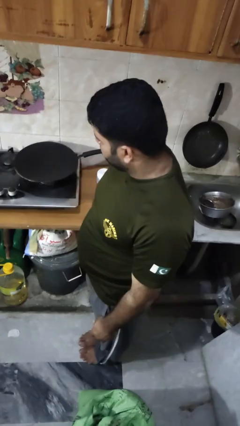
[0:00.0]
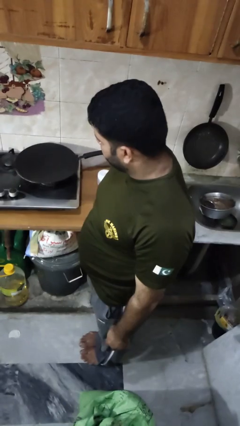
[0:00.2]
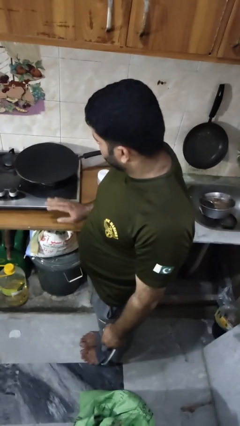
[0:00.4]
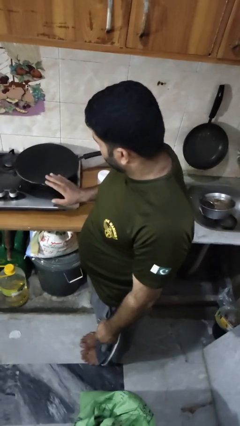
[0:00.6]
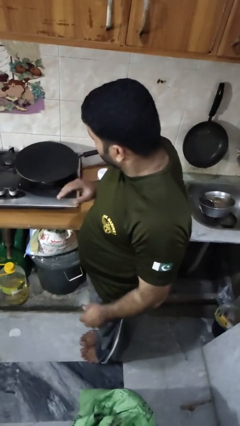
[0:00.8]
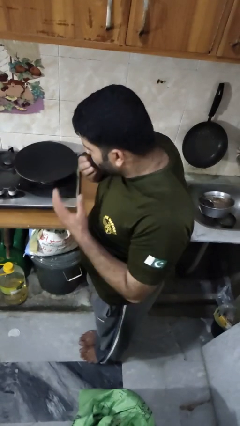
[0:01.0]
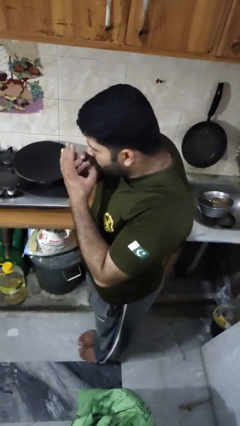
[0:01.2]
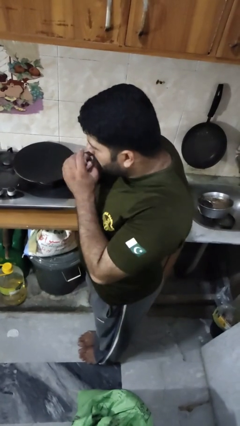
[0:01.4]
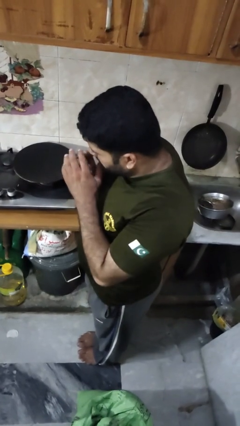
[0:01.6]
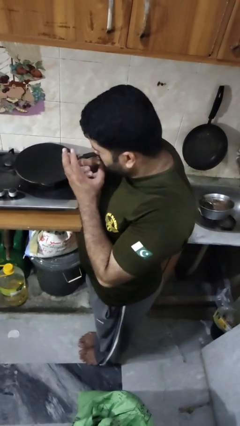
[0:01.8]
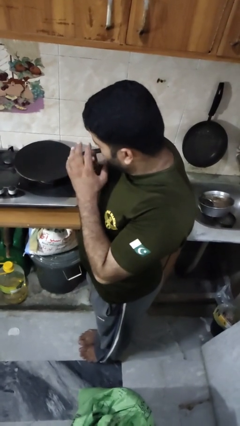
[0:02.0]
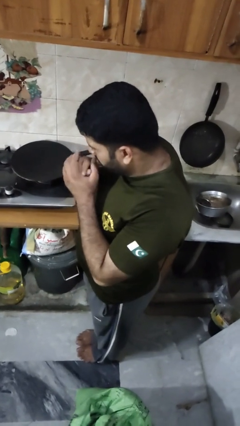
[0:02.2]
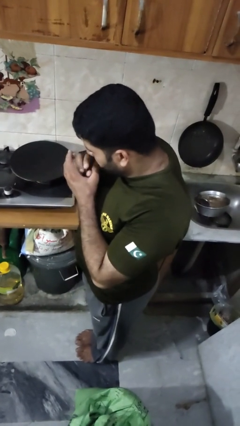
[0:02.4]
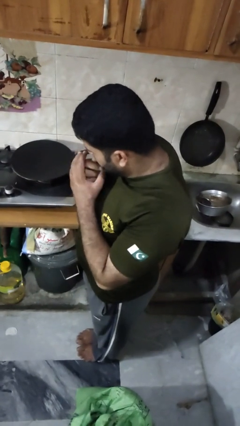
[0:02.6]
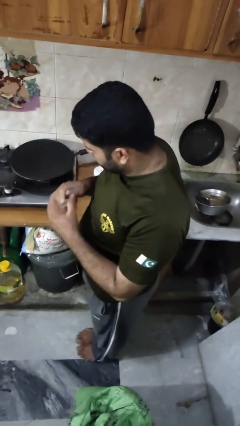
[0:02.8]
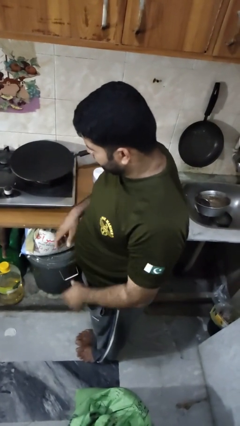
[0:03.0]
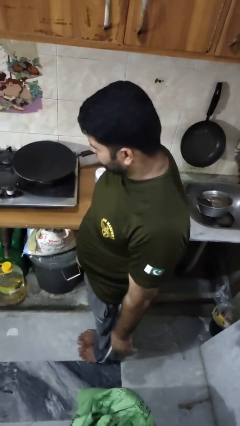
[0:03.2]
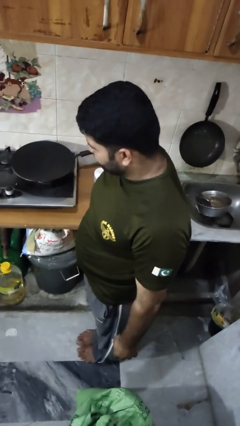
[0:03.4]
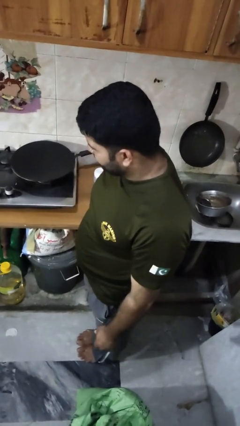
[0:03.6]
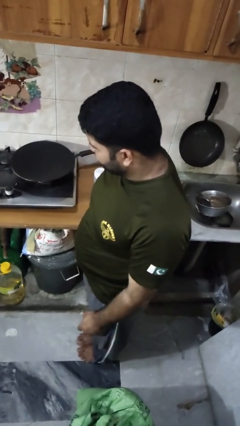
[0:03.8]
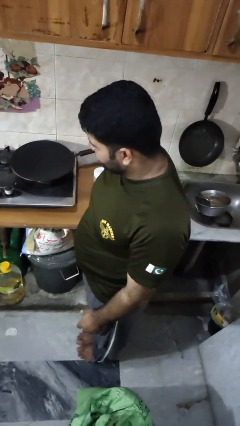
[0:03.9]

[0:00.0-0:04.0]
person burns hand

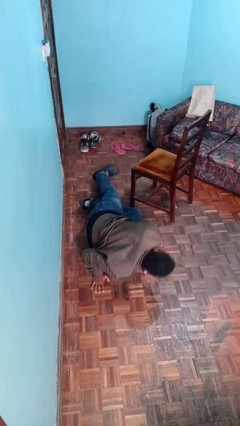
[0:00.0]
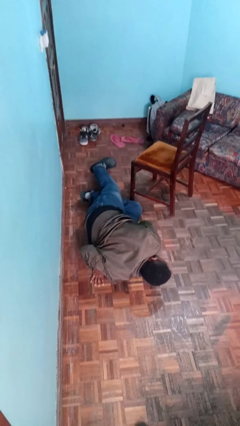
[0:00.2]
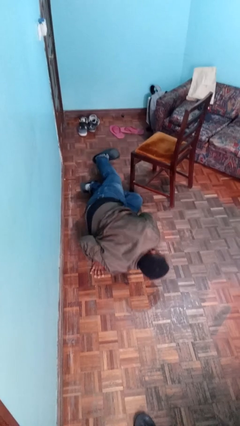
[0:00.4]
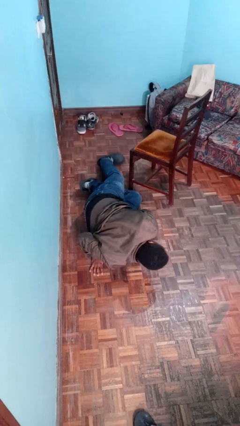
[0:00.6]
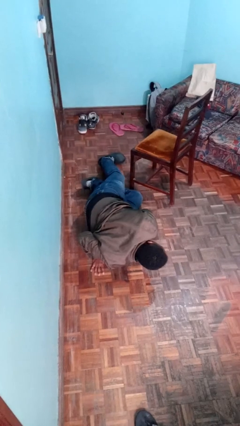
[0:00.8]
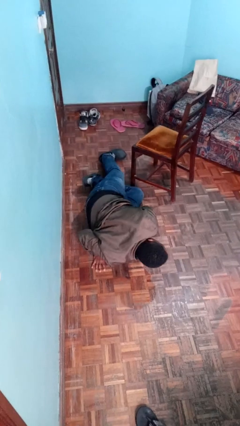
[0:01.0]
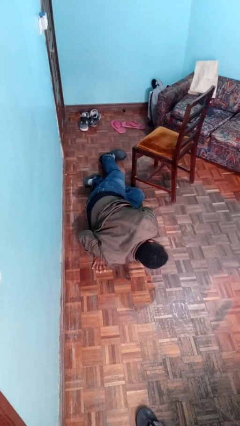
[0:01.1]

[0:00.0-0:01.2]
person lies down on floor

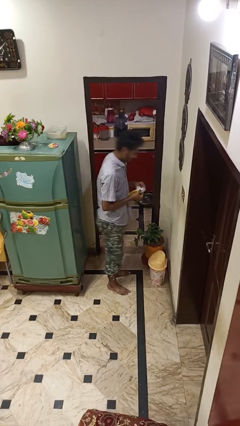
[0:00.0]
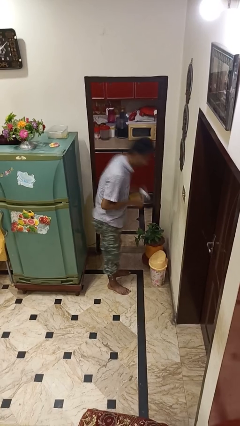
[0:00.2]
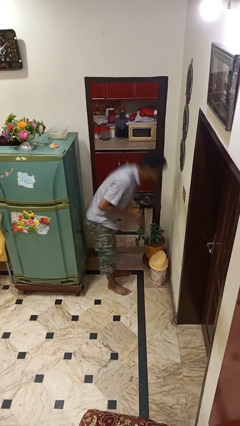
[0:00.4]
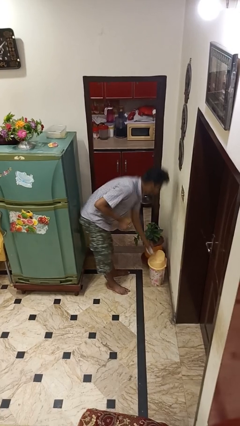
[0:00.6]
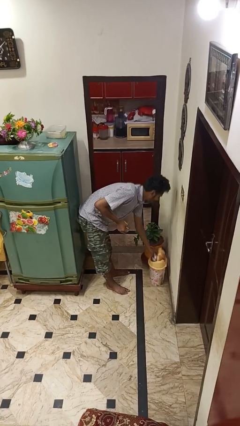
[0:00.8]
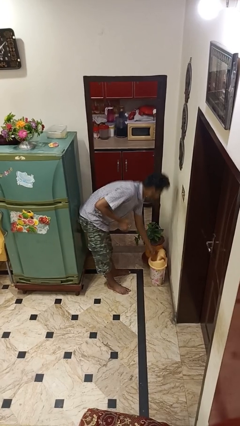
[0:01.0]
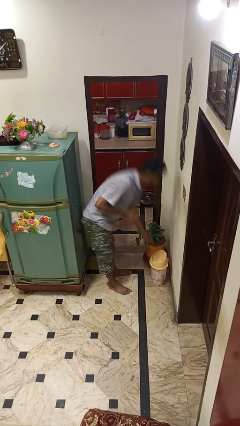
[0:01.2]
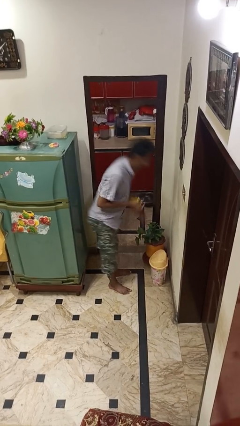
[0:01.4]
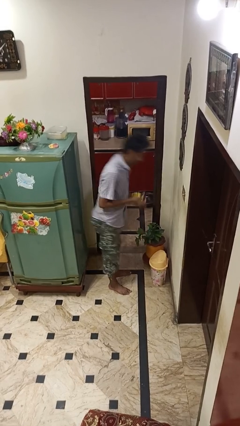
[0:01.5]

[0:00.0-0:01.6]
person discards trash

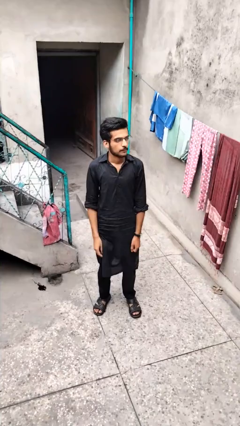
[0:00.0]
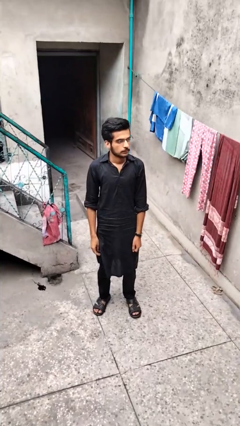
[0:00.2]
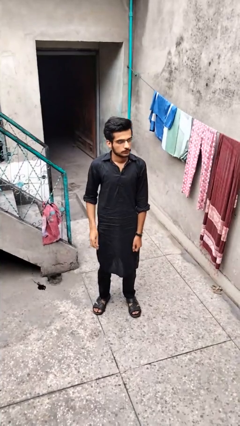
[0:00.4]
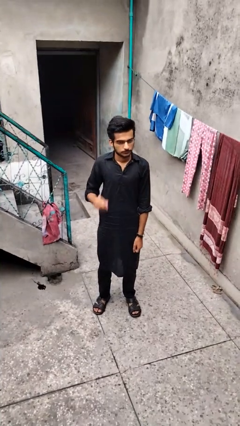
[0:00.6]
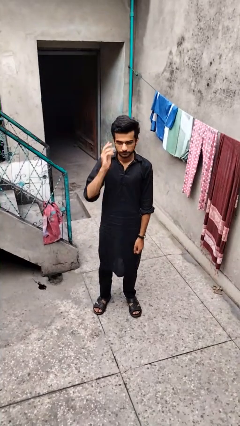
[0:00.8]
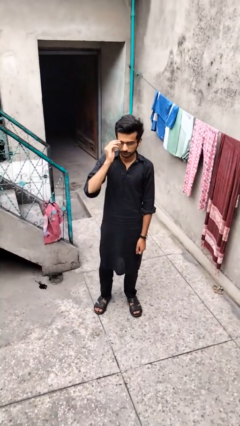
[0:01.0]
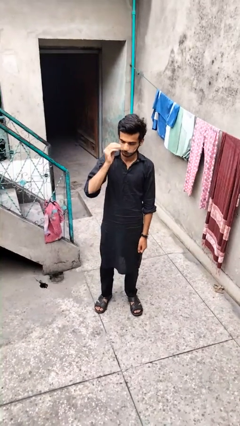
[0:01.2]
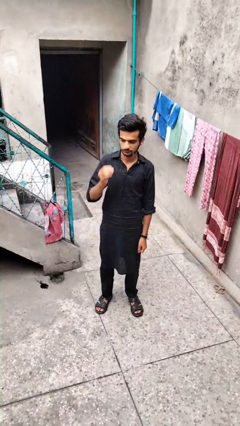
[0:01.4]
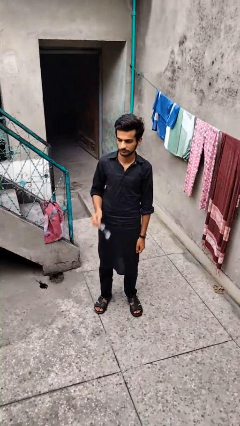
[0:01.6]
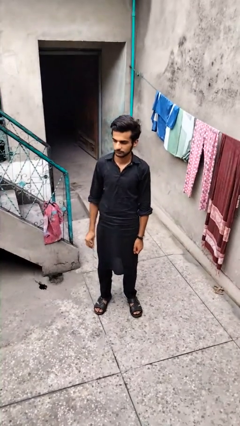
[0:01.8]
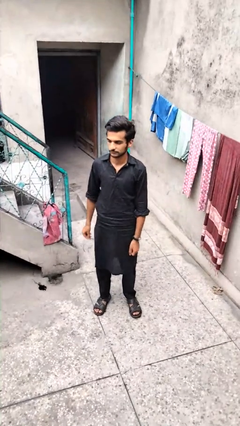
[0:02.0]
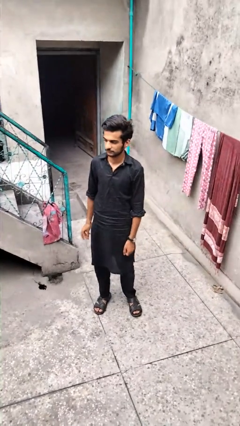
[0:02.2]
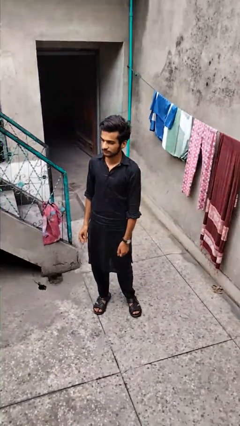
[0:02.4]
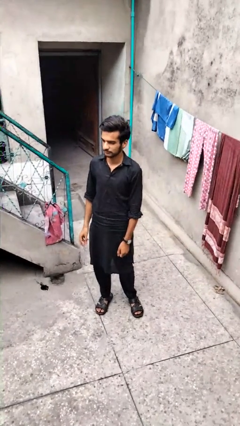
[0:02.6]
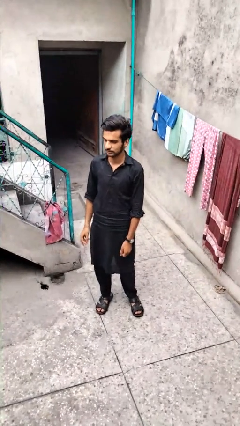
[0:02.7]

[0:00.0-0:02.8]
person takes off glasses

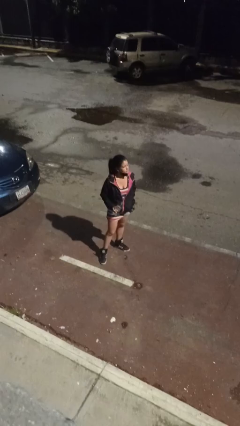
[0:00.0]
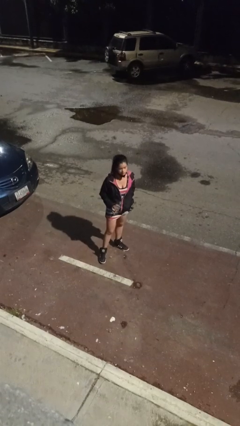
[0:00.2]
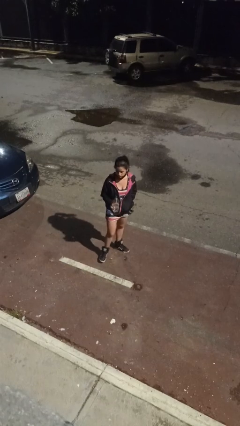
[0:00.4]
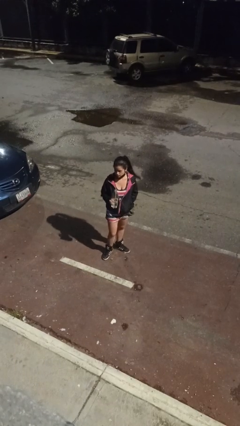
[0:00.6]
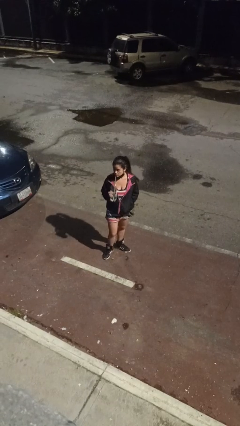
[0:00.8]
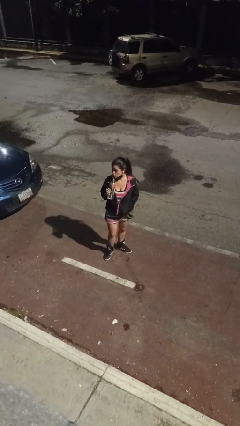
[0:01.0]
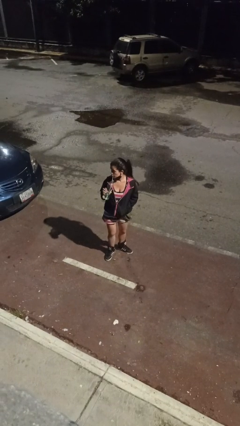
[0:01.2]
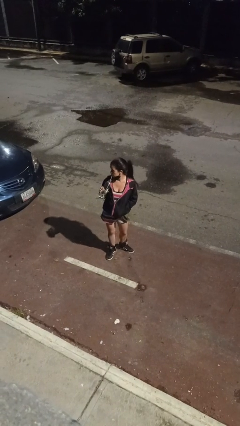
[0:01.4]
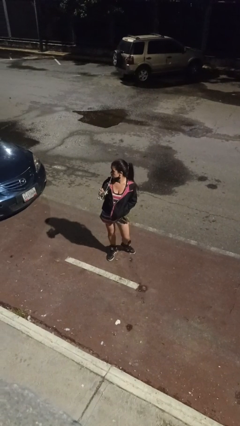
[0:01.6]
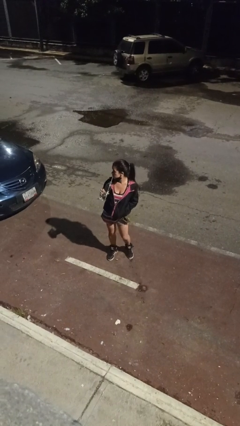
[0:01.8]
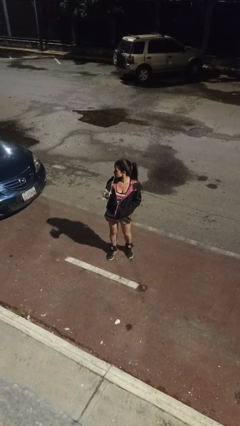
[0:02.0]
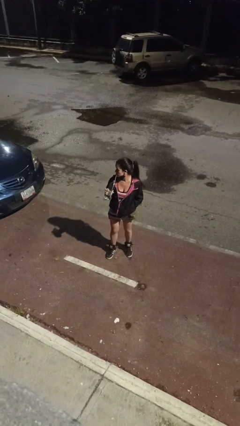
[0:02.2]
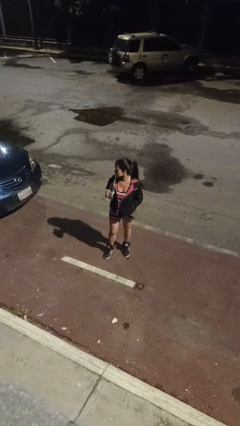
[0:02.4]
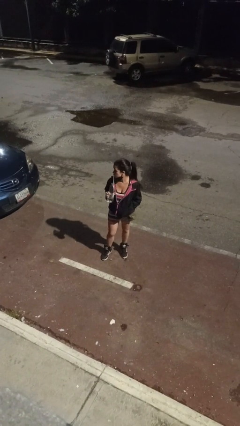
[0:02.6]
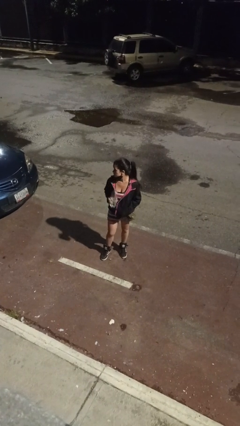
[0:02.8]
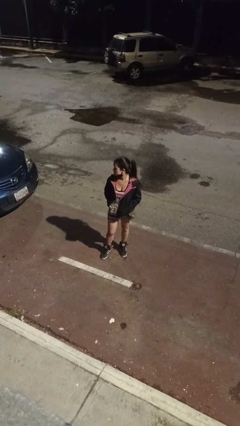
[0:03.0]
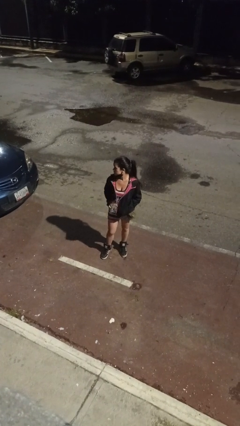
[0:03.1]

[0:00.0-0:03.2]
person drinks from straw

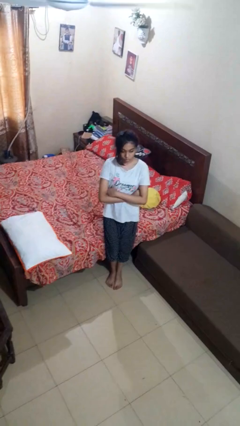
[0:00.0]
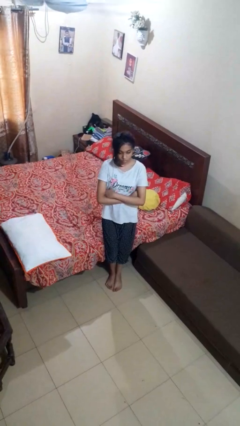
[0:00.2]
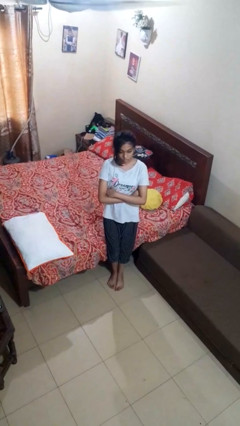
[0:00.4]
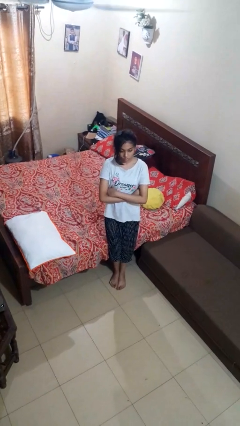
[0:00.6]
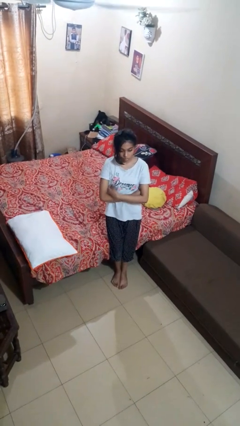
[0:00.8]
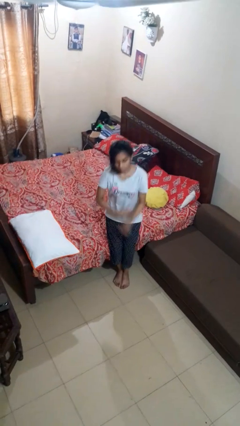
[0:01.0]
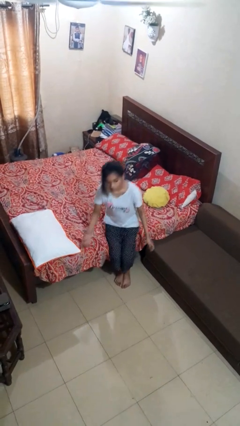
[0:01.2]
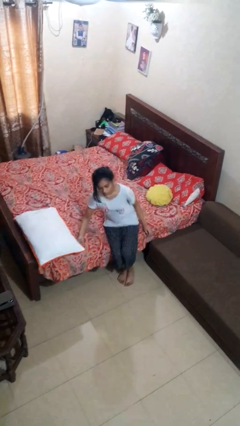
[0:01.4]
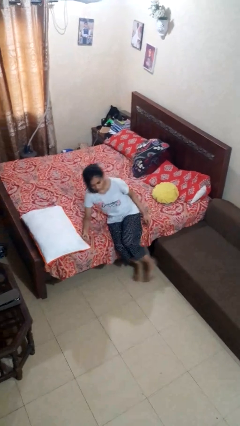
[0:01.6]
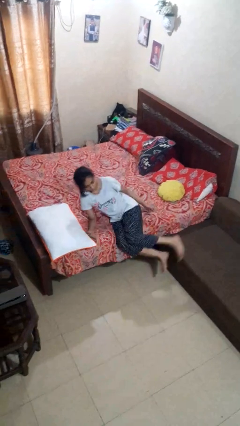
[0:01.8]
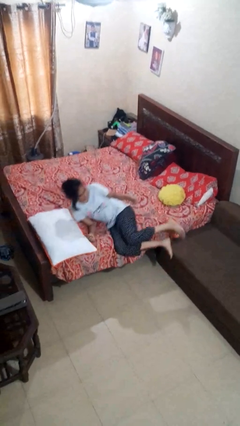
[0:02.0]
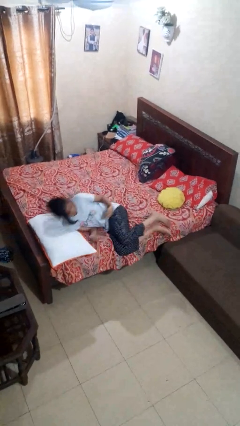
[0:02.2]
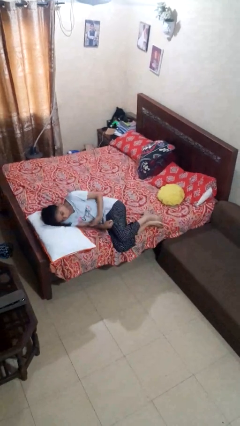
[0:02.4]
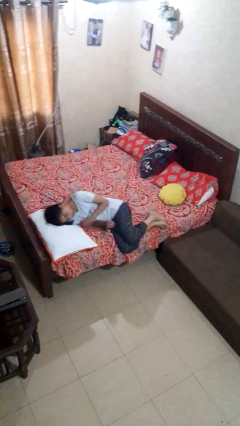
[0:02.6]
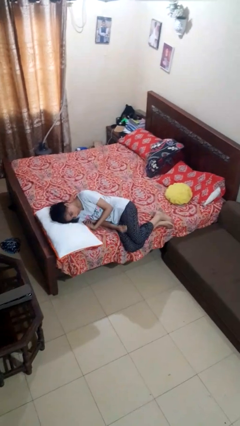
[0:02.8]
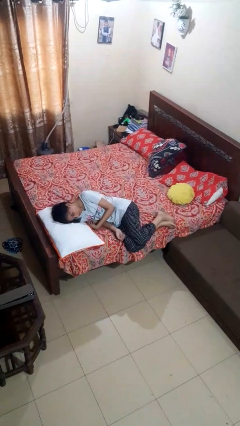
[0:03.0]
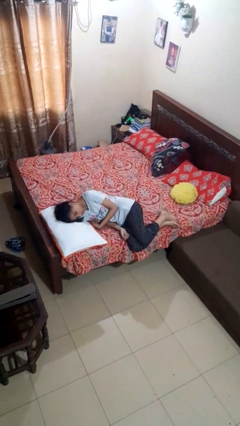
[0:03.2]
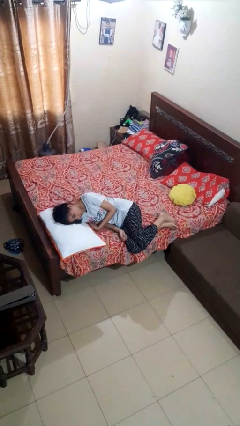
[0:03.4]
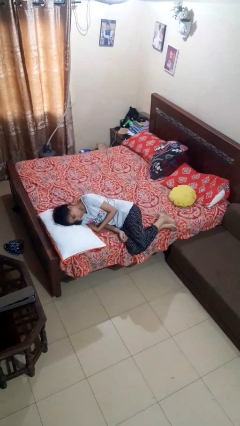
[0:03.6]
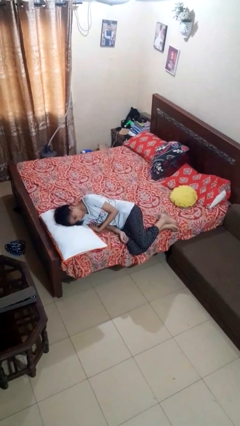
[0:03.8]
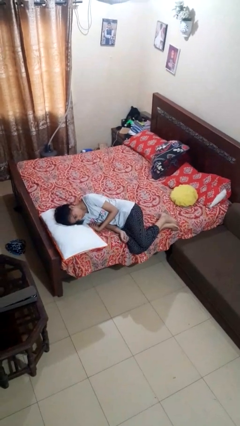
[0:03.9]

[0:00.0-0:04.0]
person lies down on bed

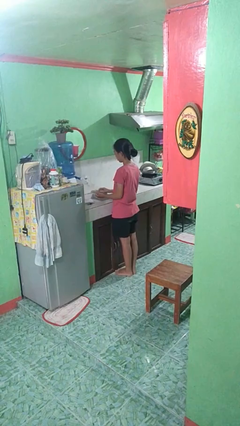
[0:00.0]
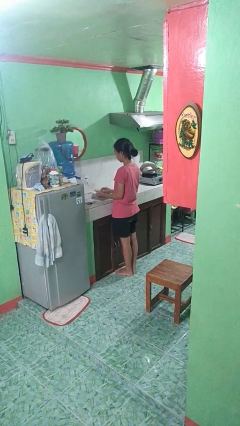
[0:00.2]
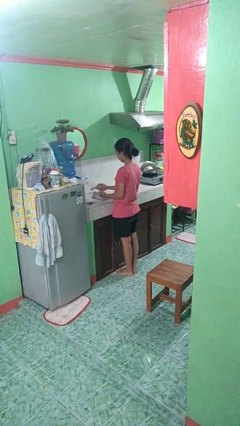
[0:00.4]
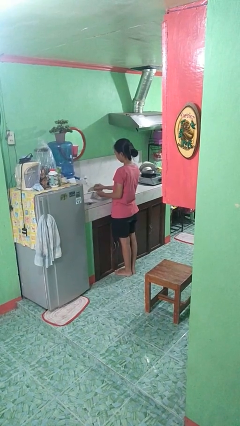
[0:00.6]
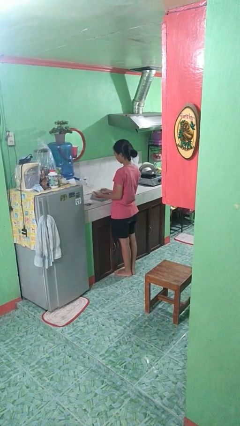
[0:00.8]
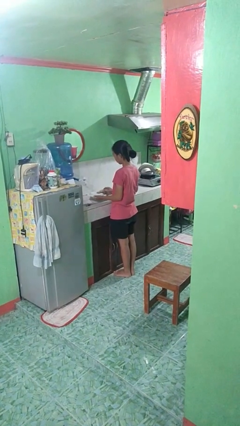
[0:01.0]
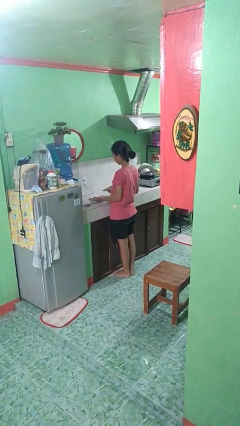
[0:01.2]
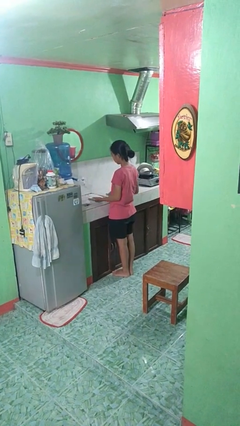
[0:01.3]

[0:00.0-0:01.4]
person dries dish
